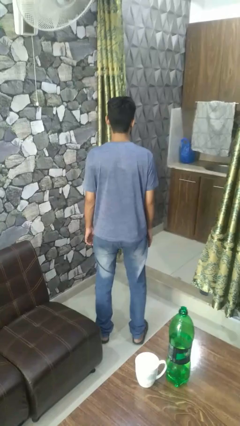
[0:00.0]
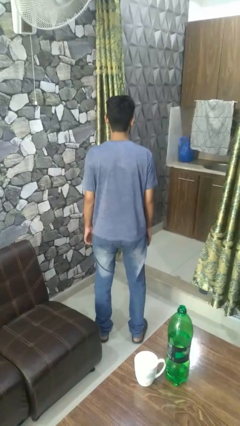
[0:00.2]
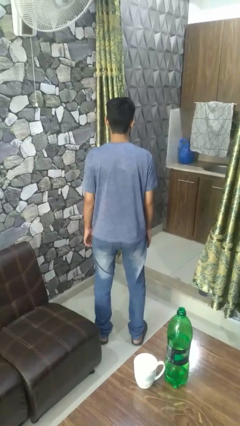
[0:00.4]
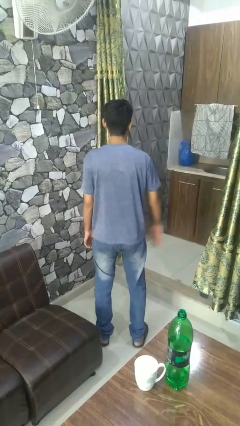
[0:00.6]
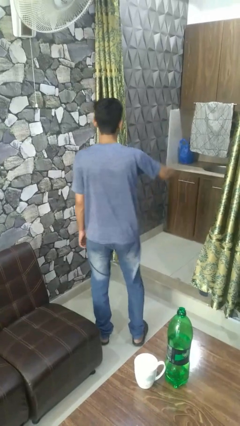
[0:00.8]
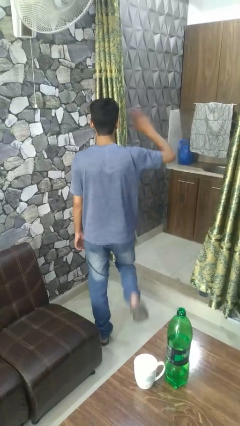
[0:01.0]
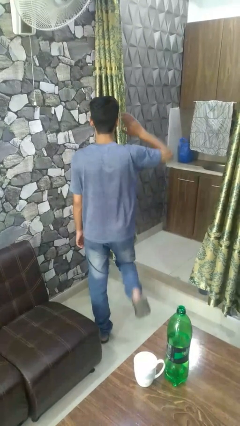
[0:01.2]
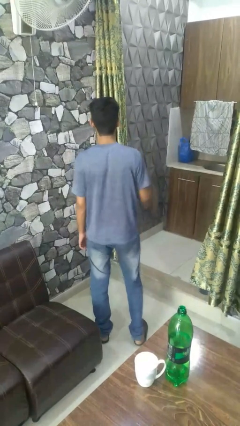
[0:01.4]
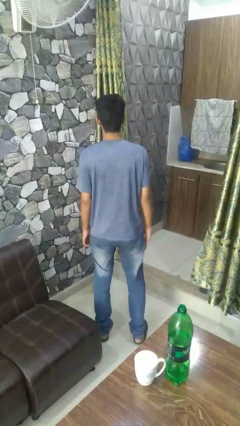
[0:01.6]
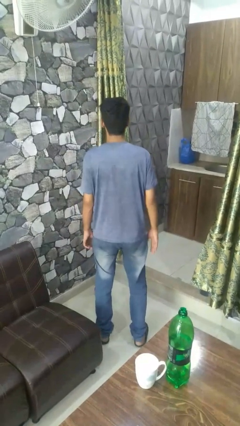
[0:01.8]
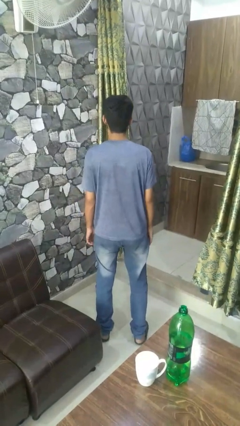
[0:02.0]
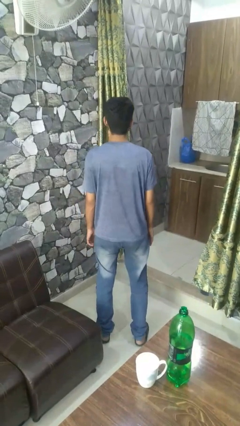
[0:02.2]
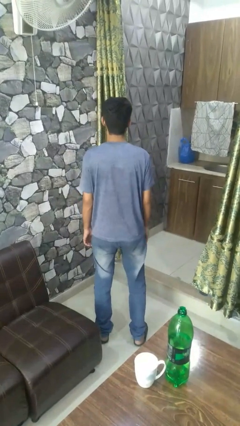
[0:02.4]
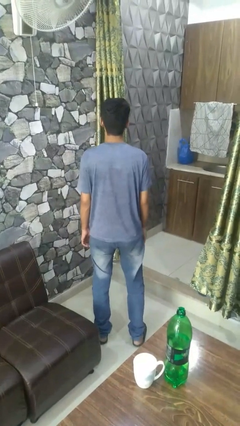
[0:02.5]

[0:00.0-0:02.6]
person salutes

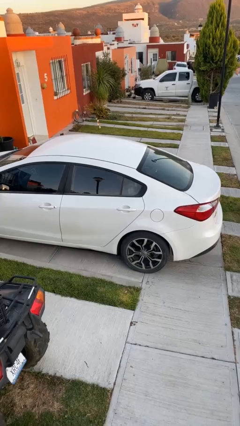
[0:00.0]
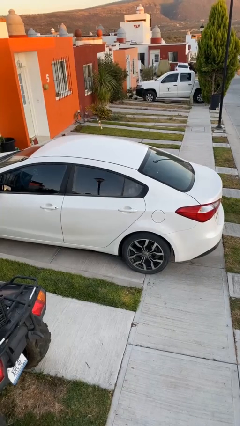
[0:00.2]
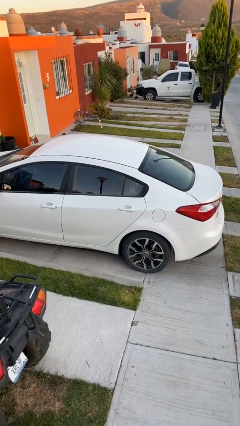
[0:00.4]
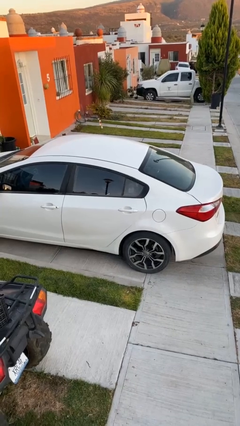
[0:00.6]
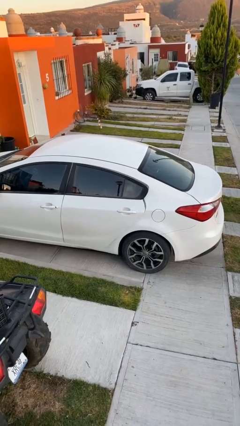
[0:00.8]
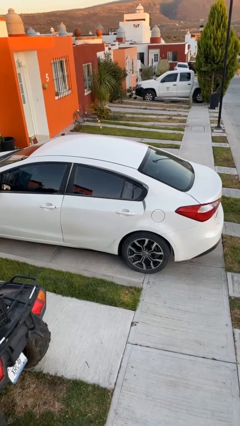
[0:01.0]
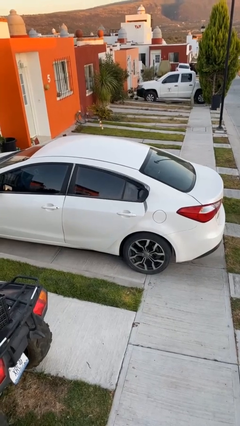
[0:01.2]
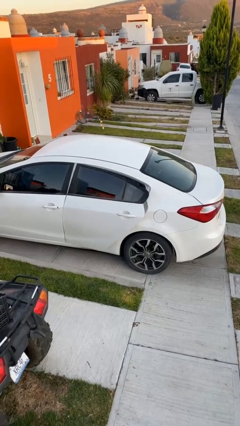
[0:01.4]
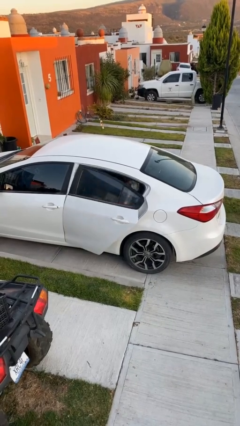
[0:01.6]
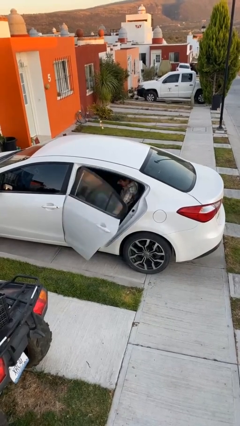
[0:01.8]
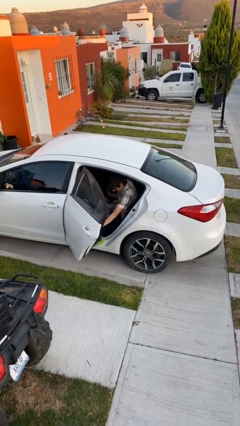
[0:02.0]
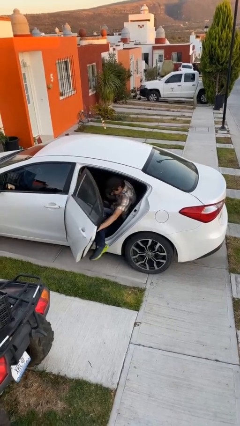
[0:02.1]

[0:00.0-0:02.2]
person opens car door

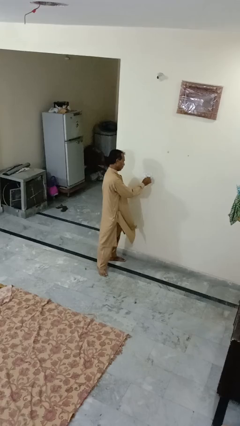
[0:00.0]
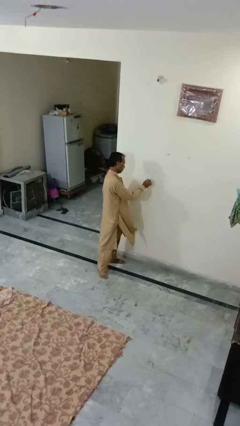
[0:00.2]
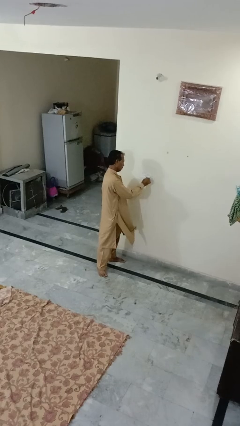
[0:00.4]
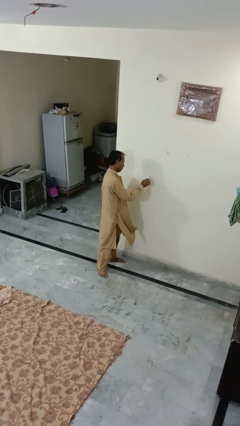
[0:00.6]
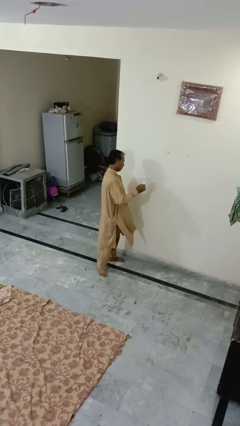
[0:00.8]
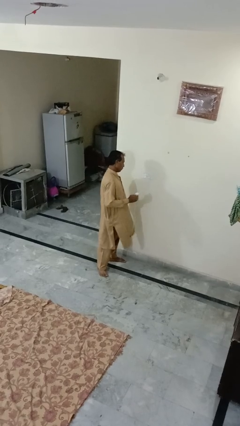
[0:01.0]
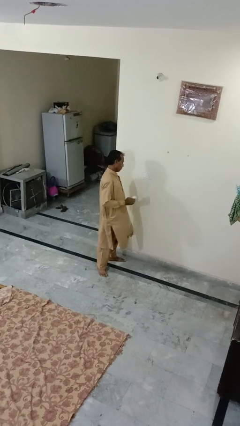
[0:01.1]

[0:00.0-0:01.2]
person unplugs from electrical socket

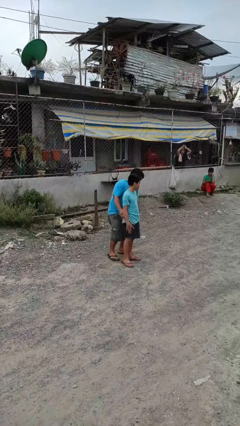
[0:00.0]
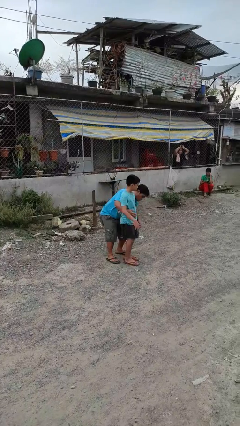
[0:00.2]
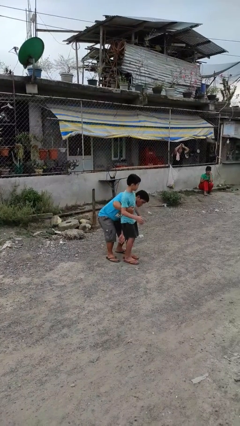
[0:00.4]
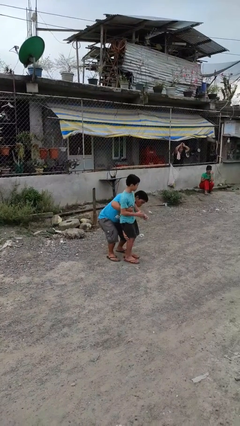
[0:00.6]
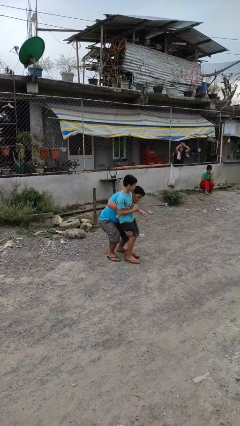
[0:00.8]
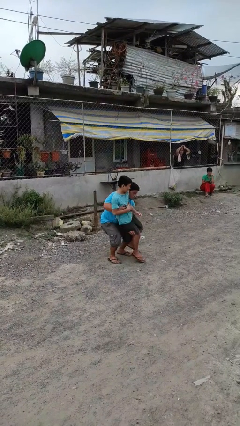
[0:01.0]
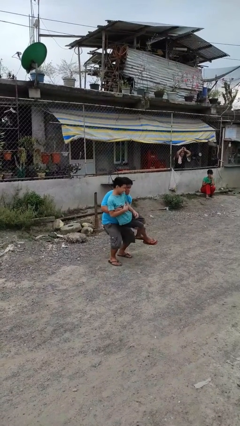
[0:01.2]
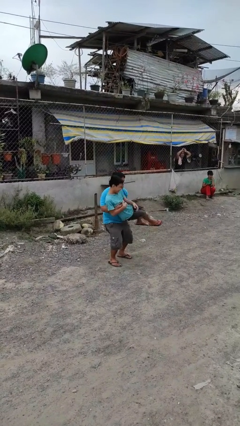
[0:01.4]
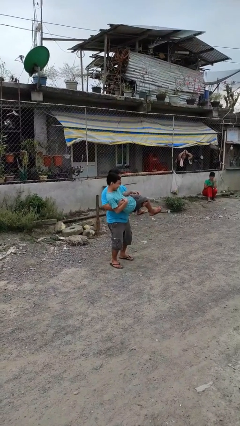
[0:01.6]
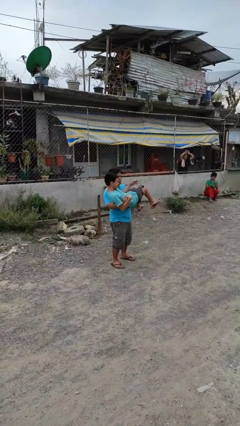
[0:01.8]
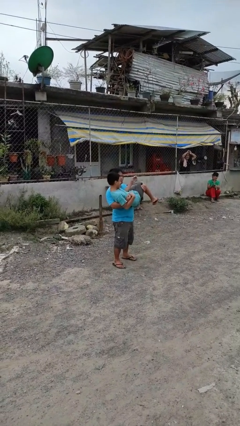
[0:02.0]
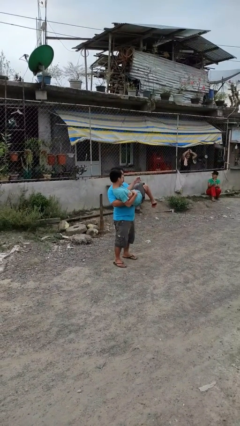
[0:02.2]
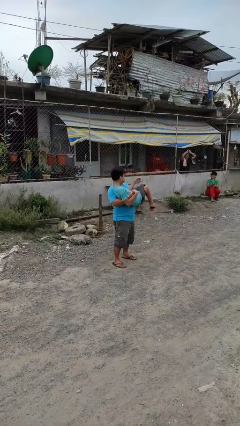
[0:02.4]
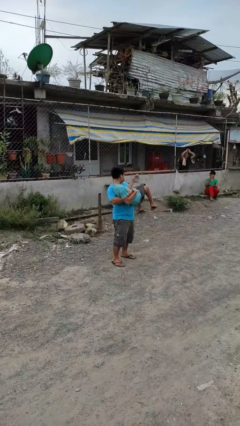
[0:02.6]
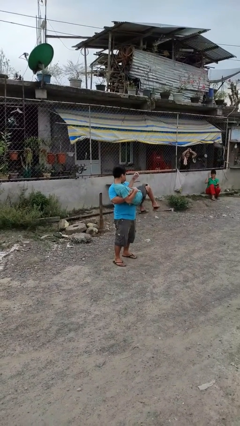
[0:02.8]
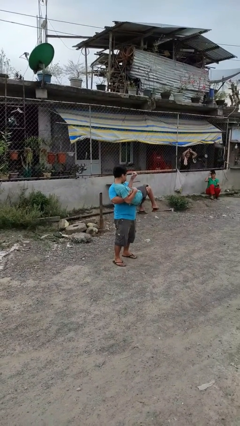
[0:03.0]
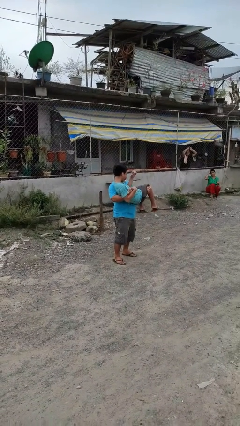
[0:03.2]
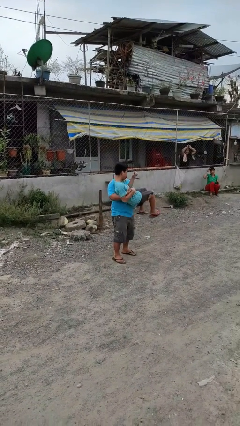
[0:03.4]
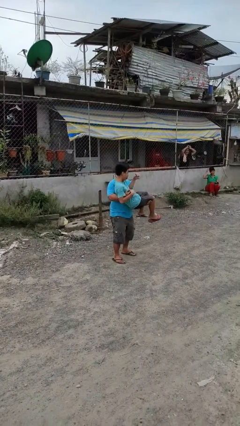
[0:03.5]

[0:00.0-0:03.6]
person picks up person

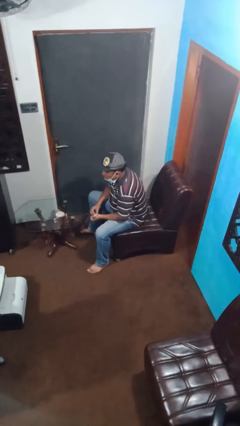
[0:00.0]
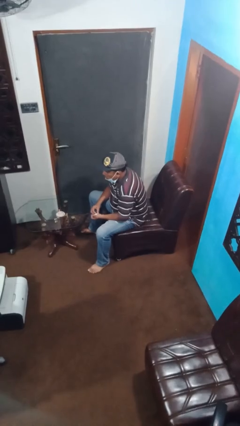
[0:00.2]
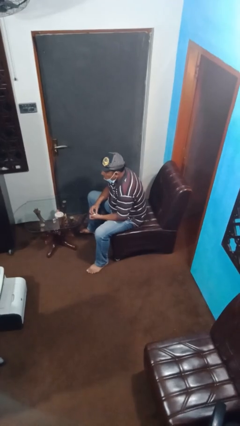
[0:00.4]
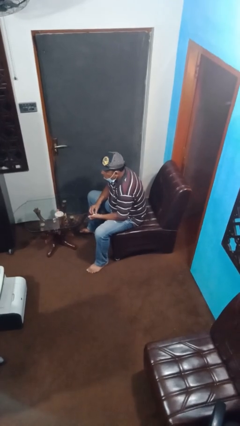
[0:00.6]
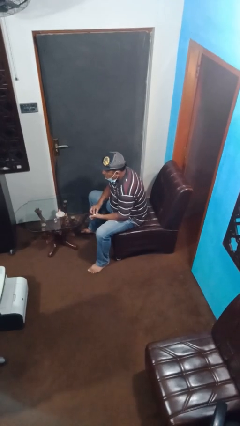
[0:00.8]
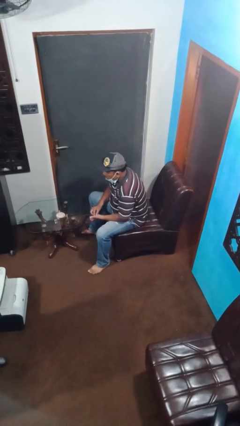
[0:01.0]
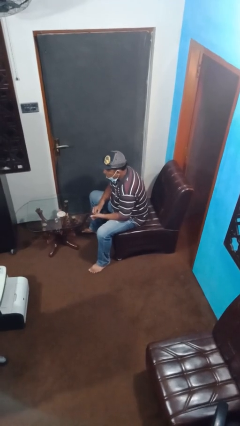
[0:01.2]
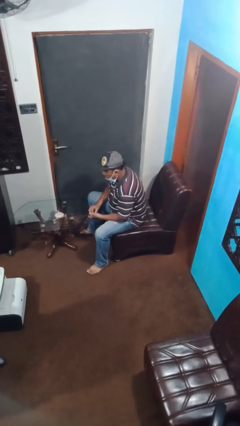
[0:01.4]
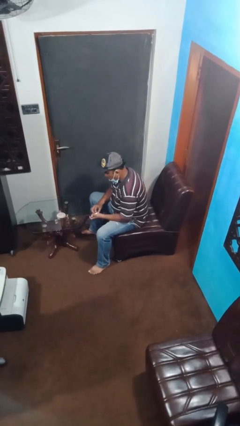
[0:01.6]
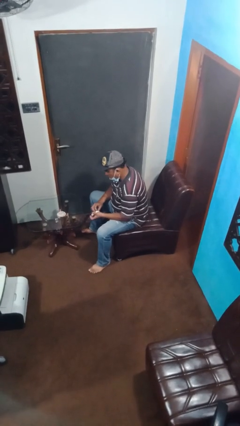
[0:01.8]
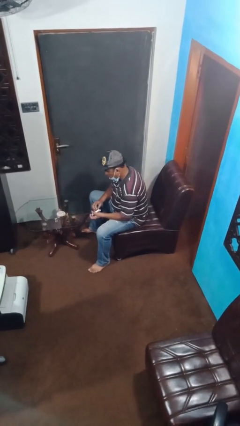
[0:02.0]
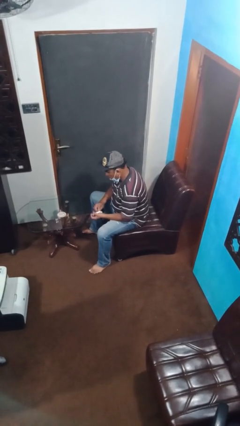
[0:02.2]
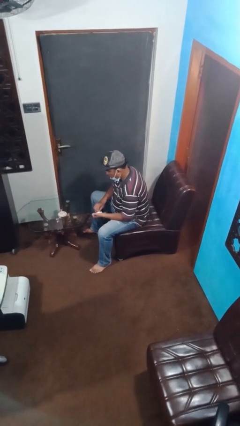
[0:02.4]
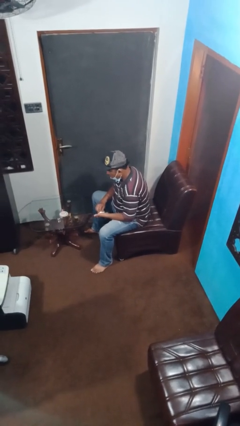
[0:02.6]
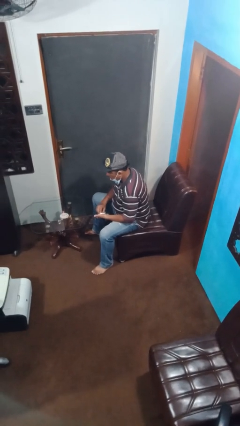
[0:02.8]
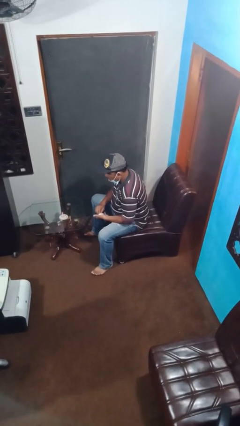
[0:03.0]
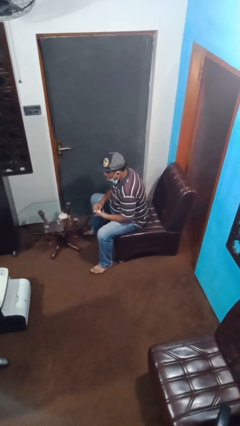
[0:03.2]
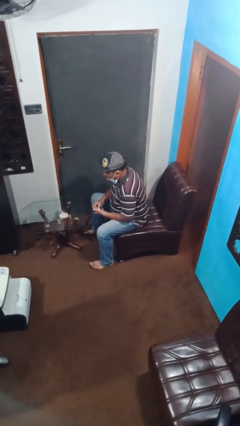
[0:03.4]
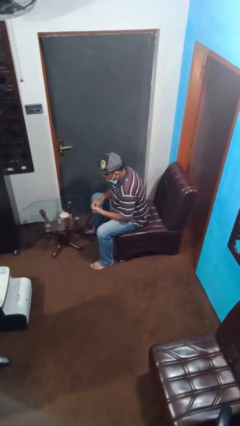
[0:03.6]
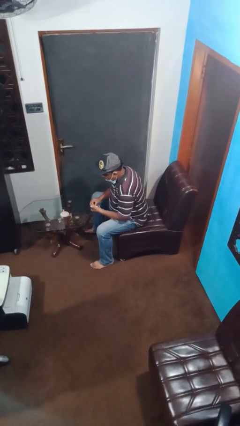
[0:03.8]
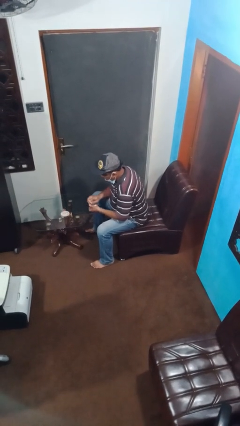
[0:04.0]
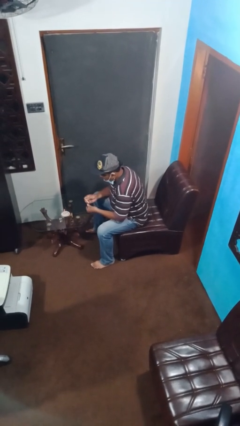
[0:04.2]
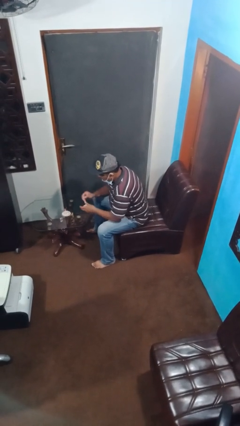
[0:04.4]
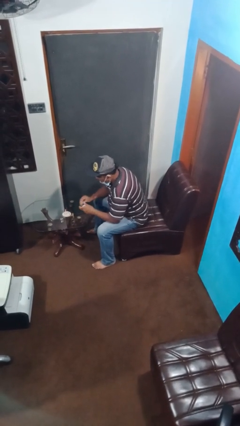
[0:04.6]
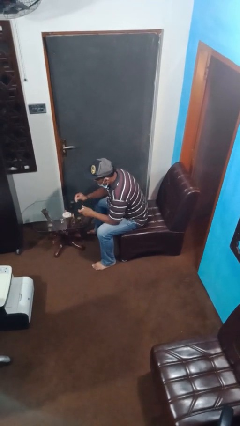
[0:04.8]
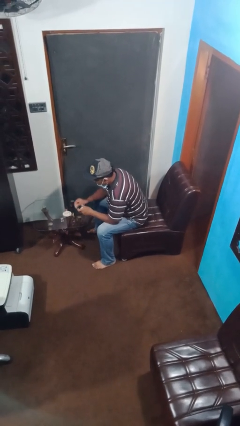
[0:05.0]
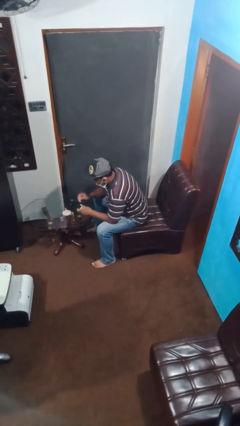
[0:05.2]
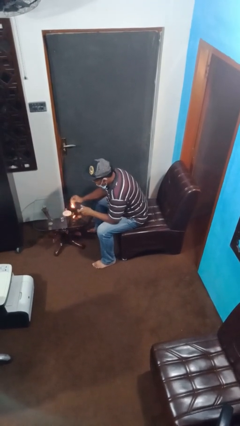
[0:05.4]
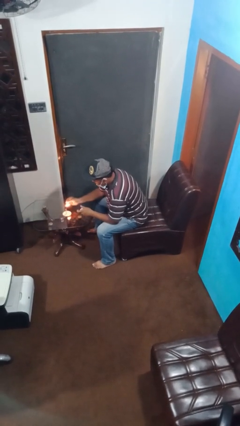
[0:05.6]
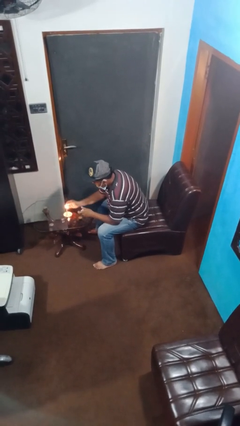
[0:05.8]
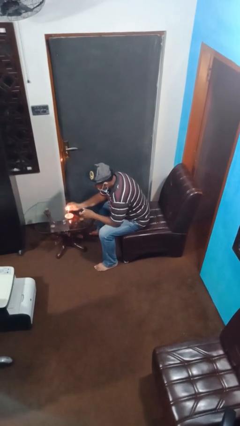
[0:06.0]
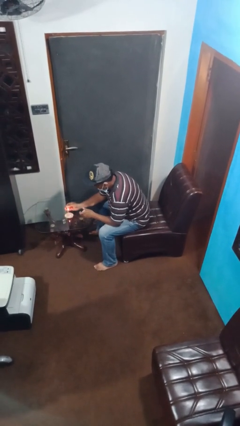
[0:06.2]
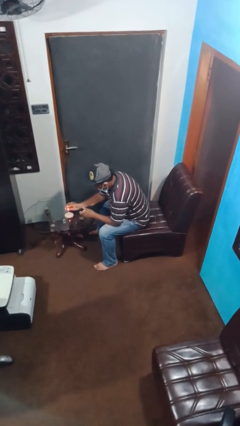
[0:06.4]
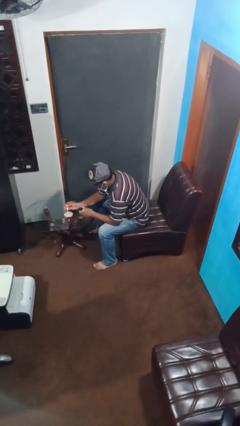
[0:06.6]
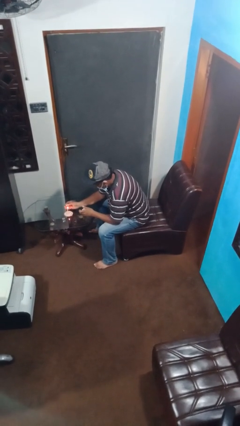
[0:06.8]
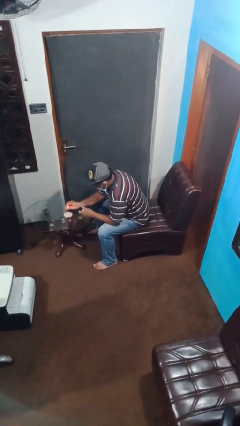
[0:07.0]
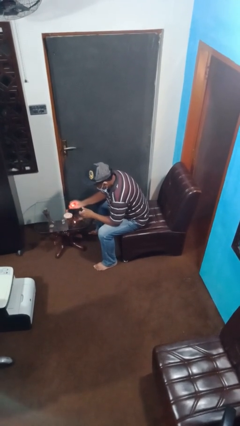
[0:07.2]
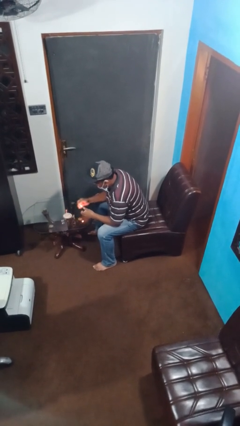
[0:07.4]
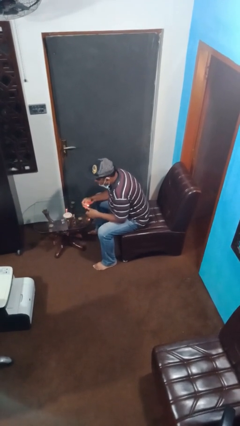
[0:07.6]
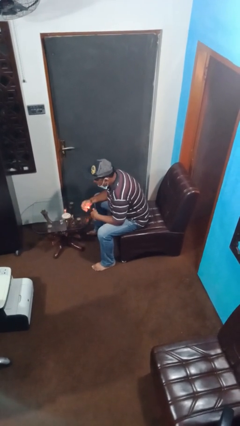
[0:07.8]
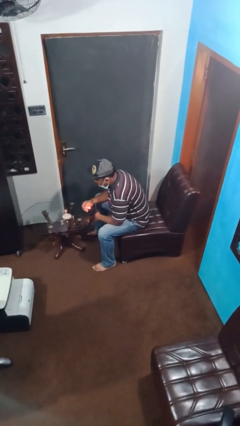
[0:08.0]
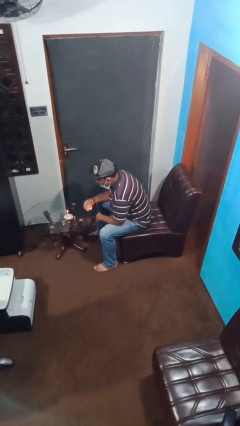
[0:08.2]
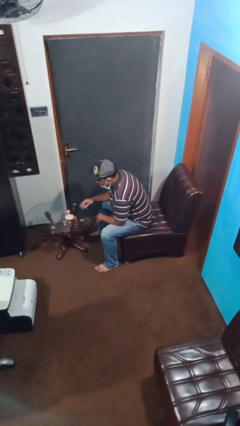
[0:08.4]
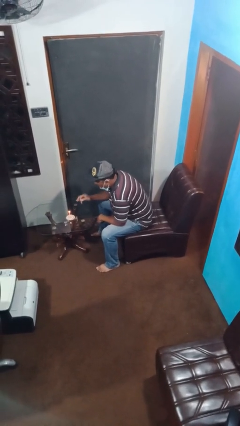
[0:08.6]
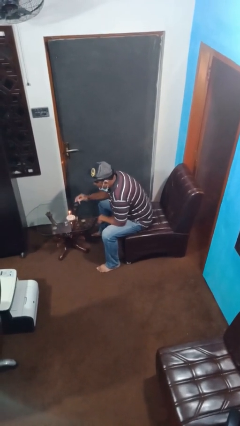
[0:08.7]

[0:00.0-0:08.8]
person lights candle
